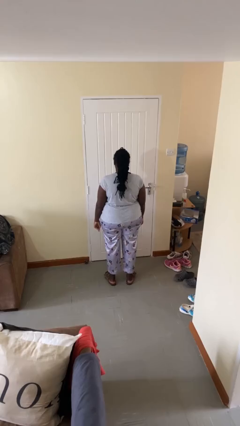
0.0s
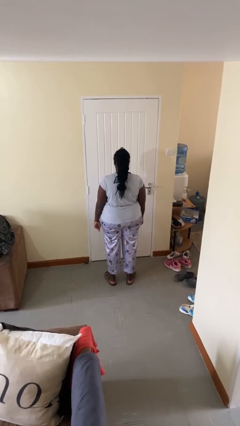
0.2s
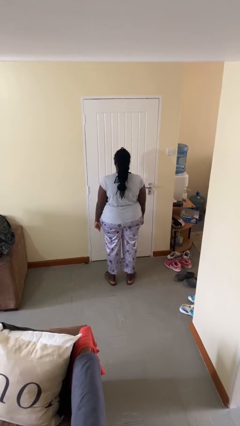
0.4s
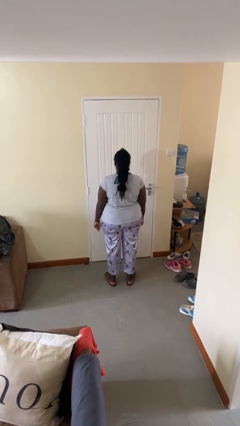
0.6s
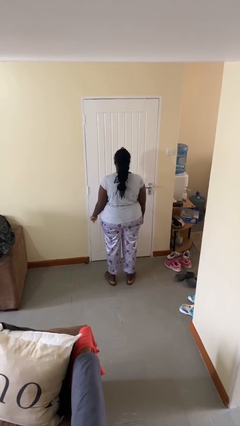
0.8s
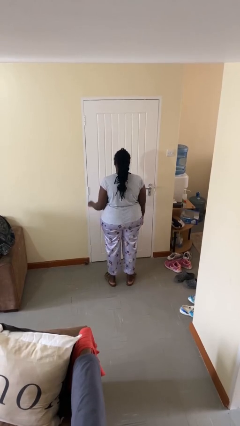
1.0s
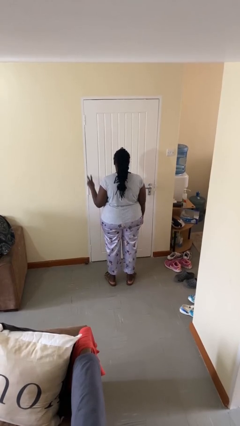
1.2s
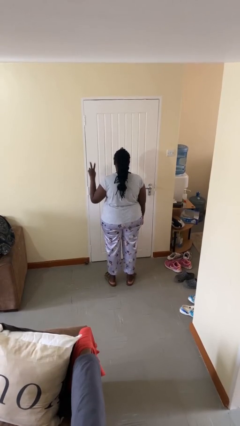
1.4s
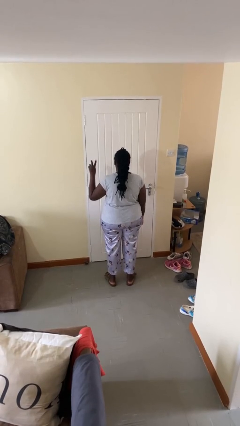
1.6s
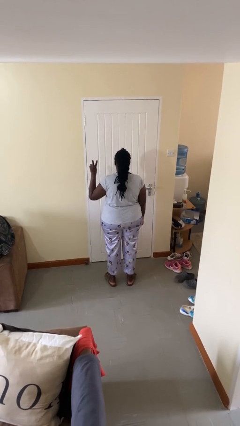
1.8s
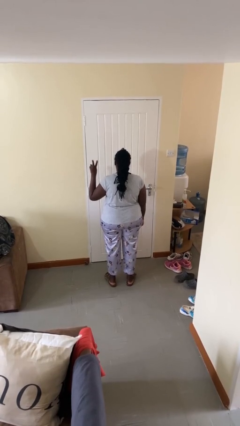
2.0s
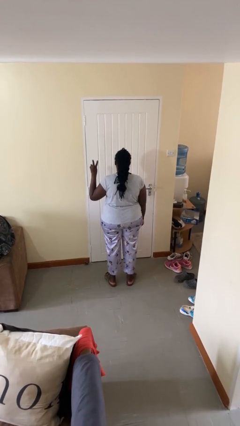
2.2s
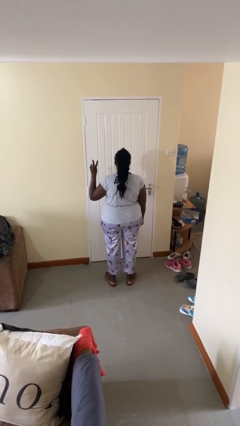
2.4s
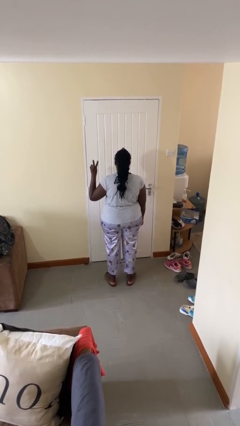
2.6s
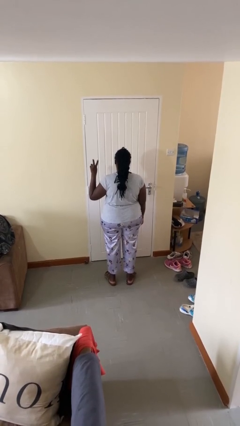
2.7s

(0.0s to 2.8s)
person gestures peace

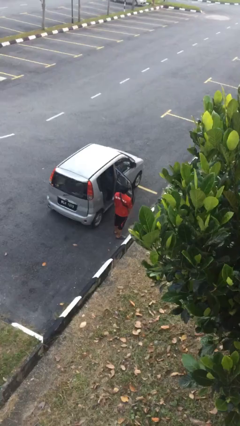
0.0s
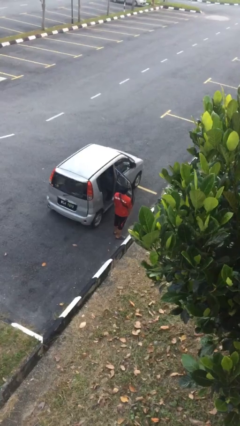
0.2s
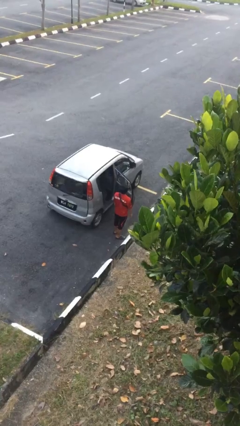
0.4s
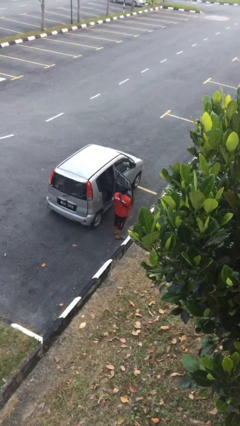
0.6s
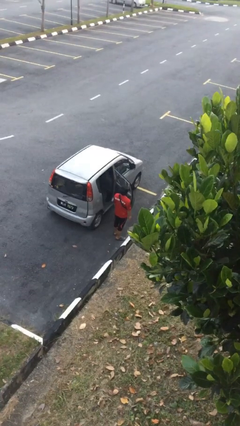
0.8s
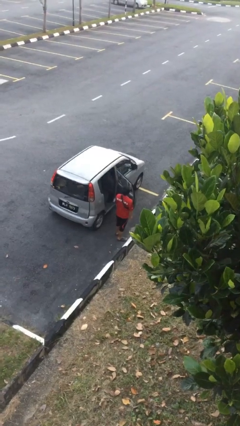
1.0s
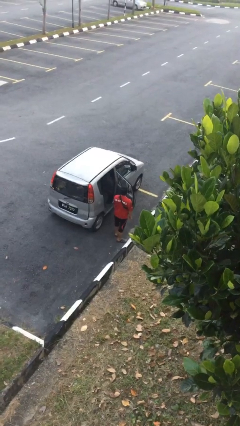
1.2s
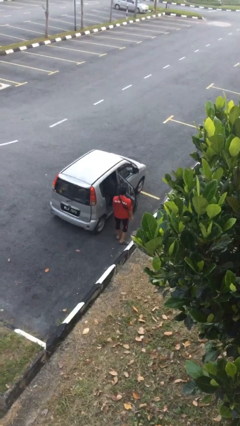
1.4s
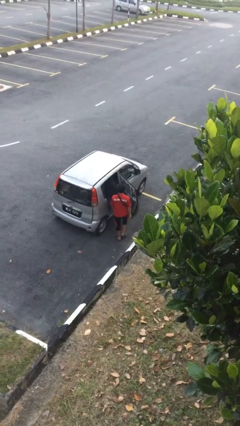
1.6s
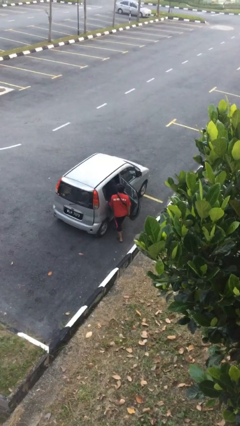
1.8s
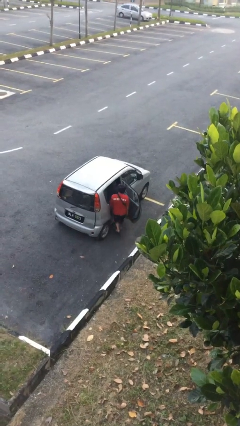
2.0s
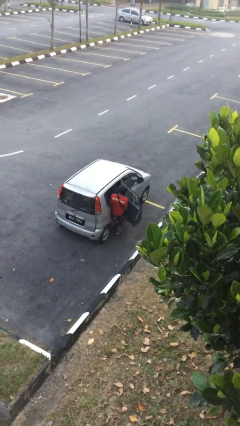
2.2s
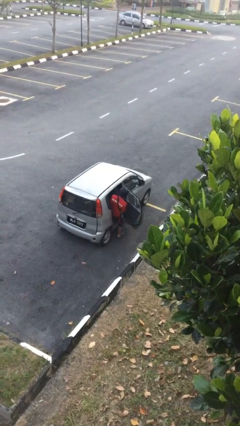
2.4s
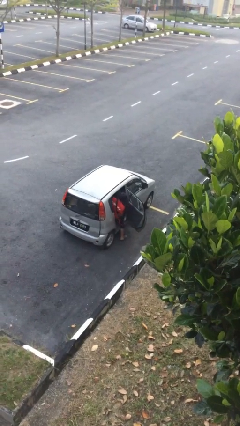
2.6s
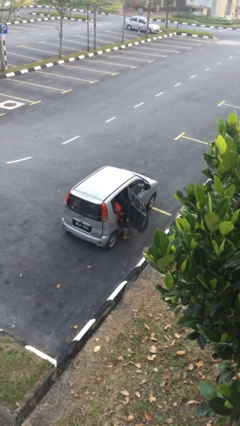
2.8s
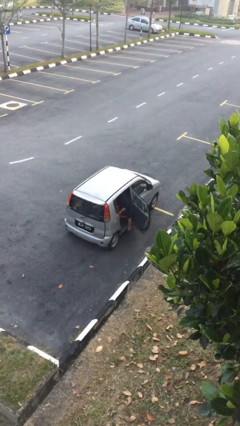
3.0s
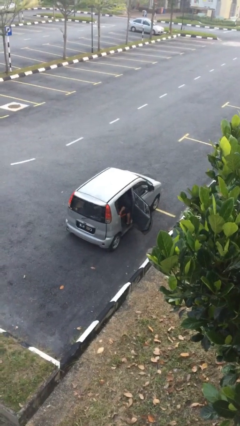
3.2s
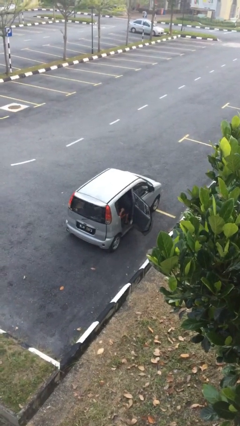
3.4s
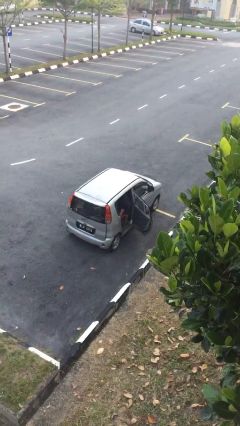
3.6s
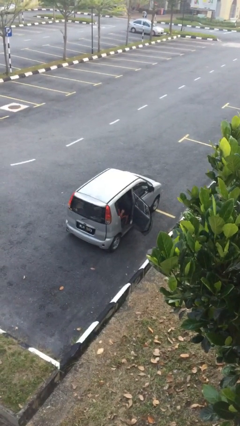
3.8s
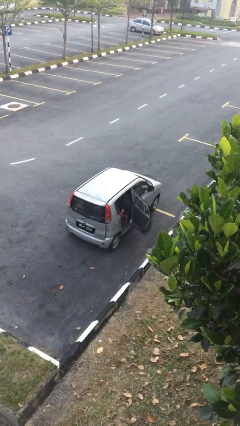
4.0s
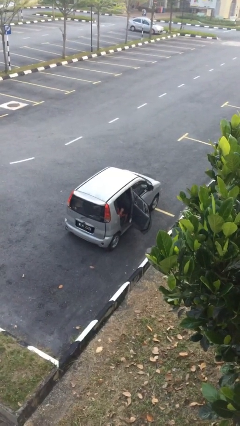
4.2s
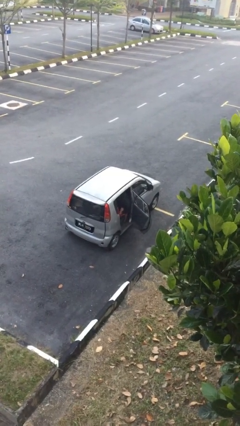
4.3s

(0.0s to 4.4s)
person enters car

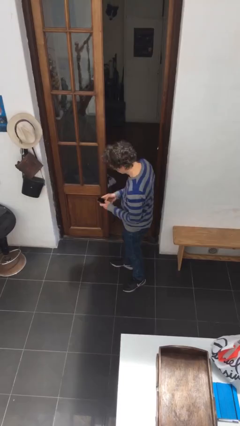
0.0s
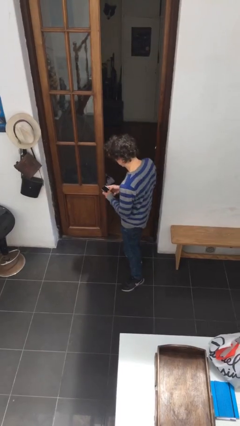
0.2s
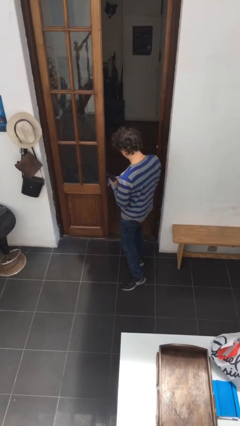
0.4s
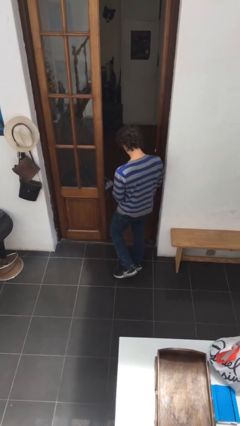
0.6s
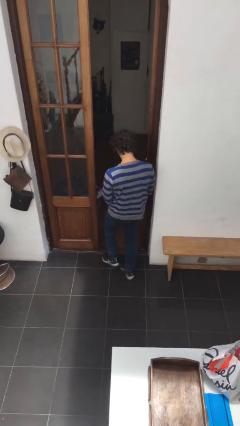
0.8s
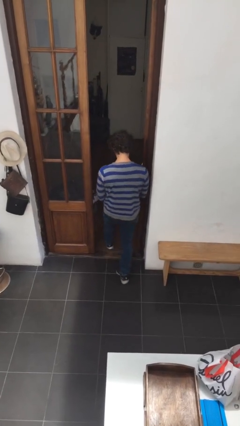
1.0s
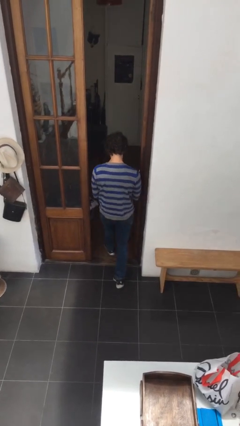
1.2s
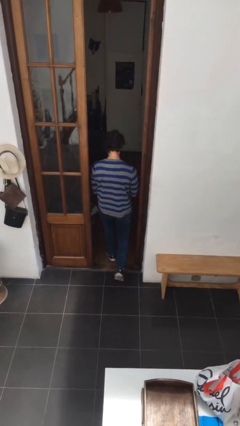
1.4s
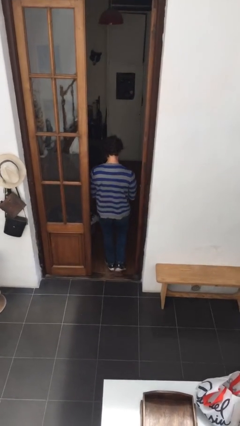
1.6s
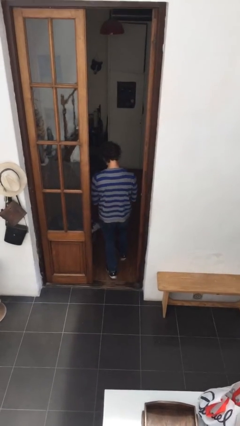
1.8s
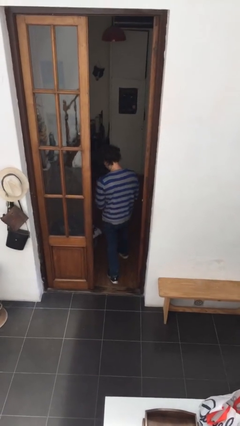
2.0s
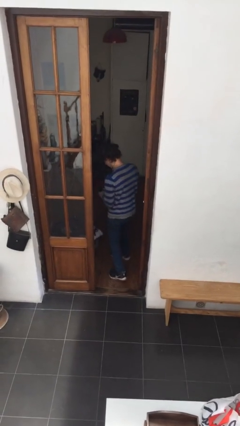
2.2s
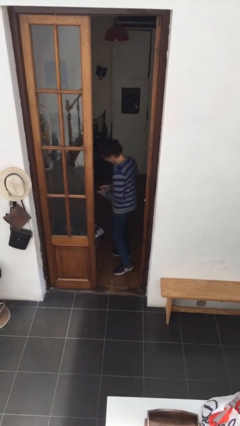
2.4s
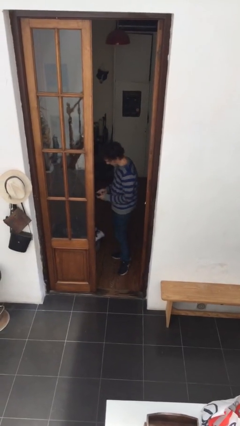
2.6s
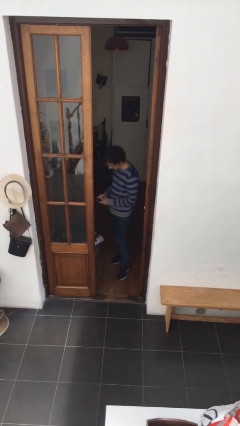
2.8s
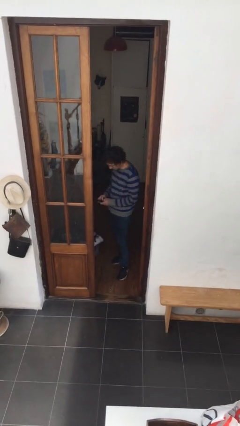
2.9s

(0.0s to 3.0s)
person exits scene through structure

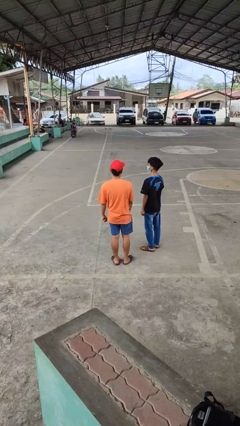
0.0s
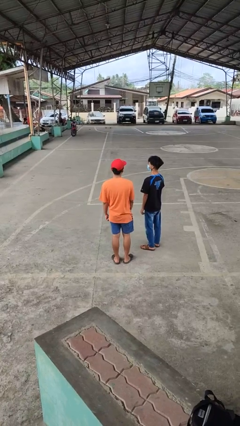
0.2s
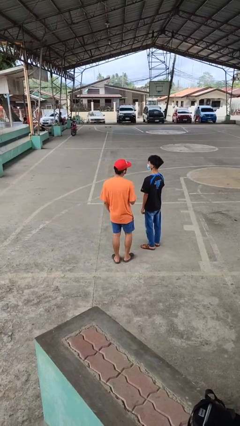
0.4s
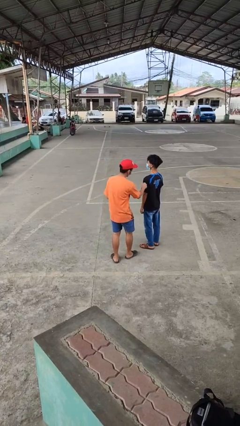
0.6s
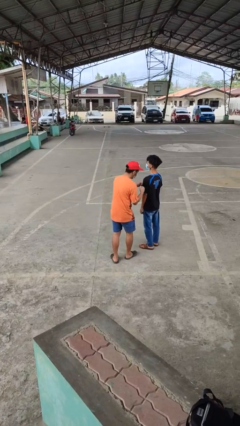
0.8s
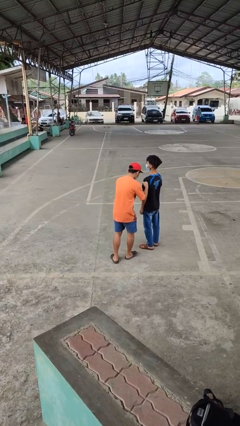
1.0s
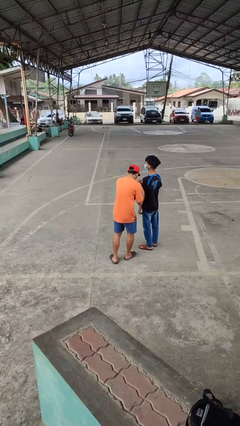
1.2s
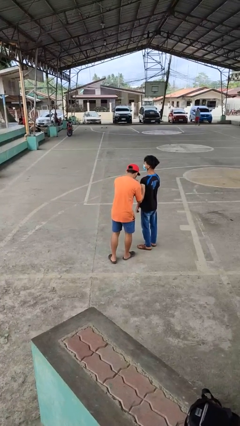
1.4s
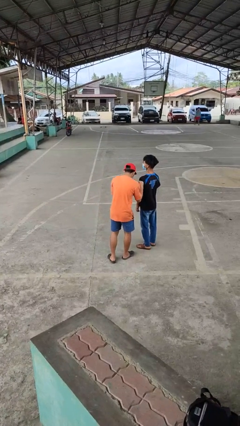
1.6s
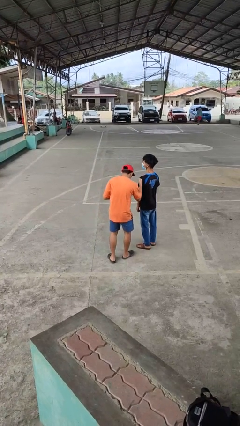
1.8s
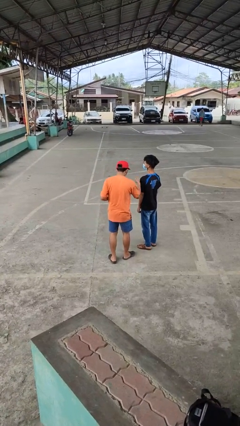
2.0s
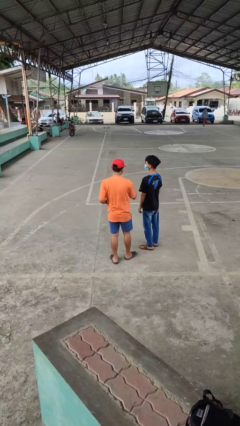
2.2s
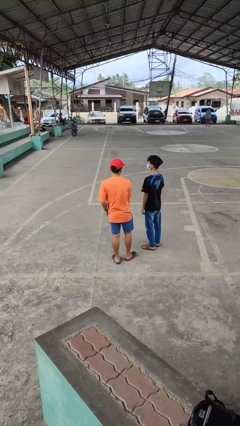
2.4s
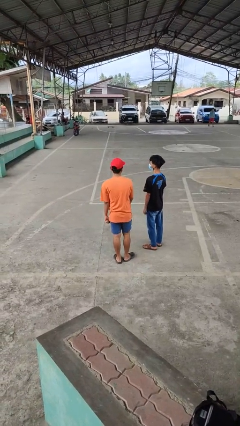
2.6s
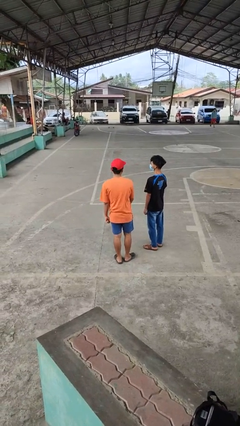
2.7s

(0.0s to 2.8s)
person pounds shoulders of person

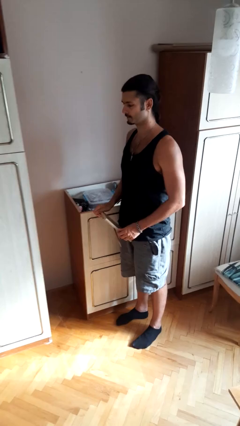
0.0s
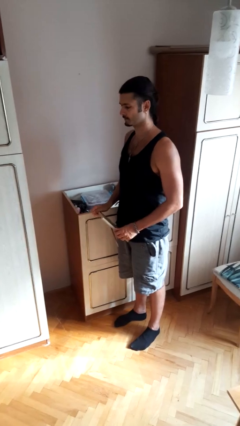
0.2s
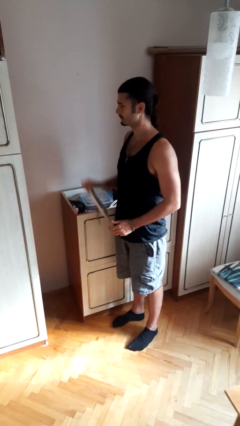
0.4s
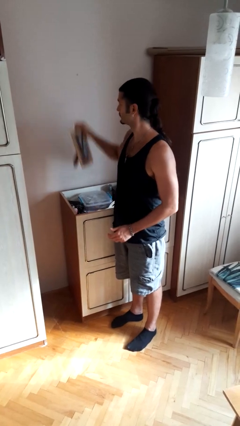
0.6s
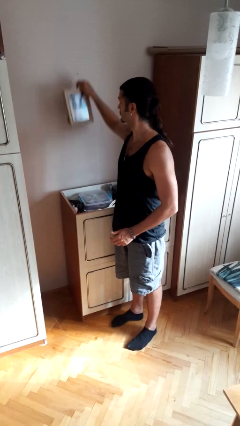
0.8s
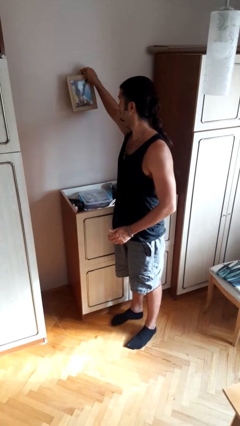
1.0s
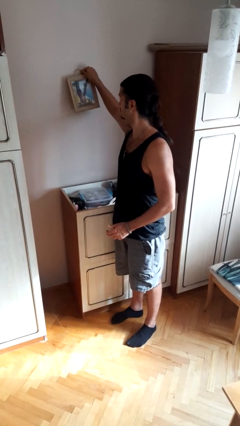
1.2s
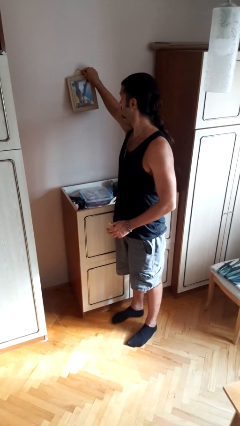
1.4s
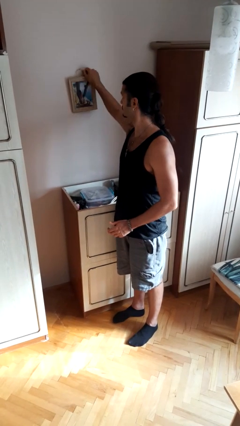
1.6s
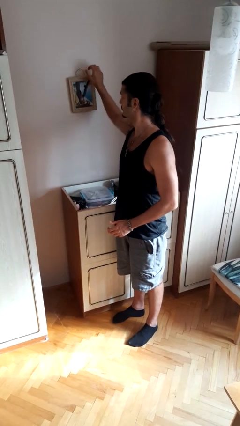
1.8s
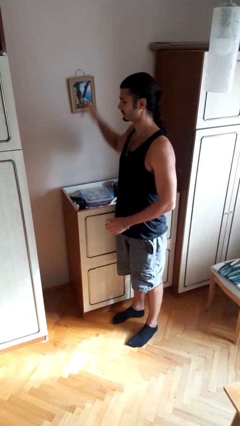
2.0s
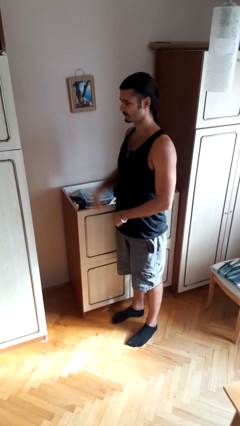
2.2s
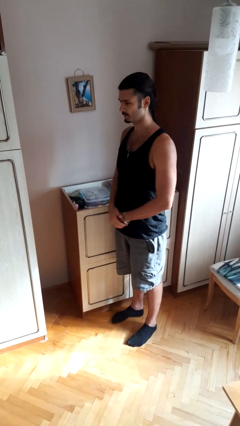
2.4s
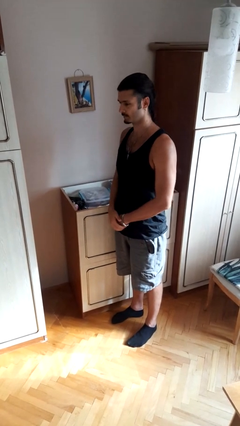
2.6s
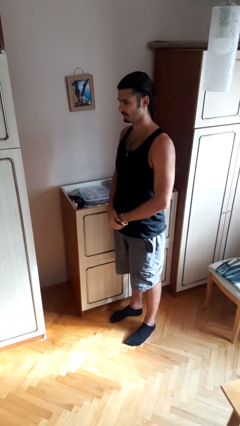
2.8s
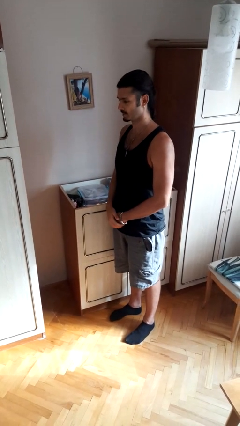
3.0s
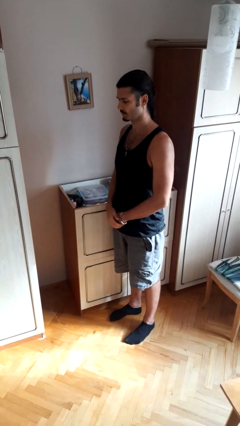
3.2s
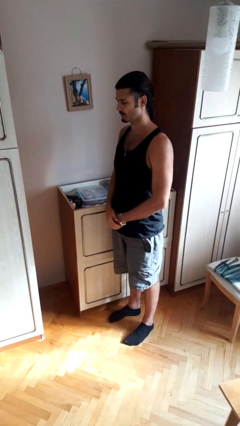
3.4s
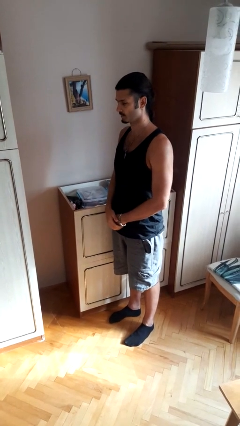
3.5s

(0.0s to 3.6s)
person puts up picture frame

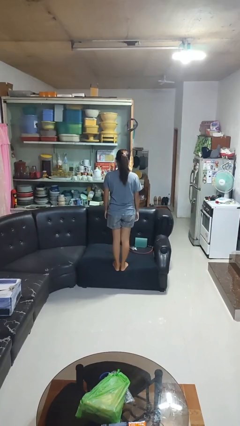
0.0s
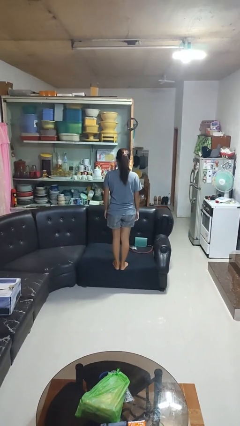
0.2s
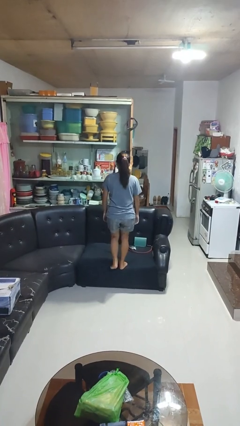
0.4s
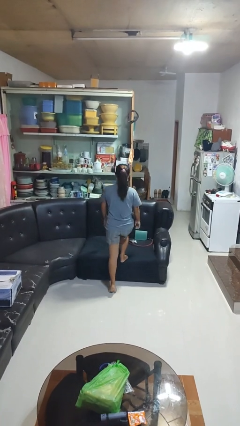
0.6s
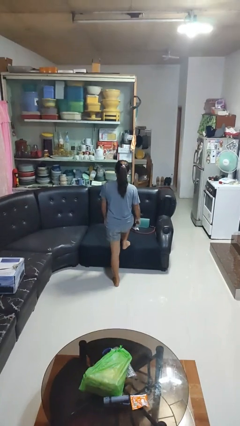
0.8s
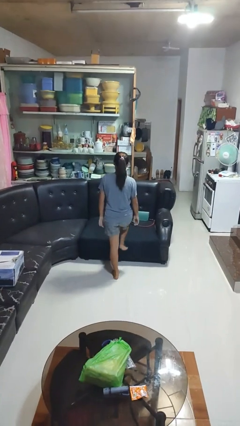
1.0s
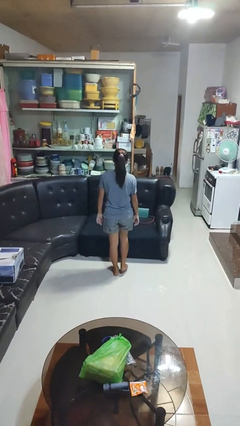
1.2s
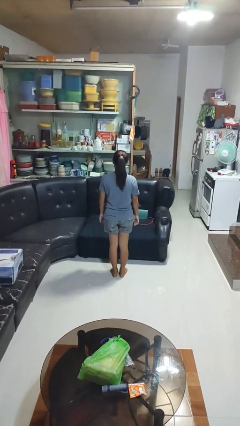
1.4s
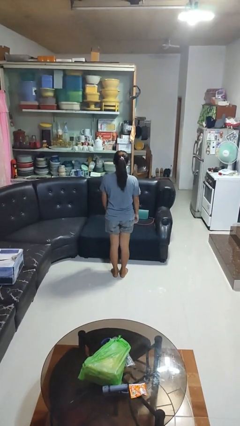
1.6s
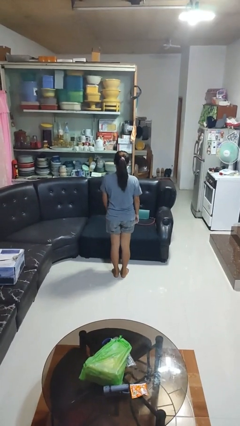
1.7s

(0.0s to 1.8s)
person climbs off couch
